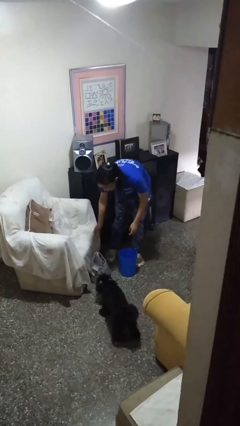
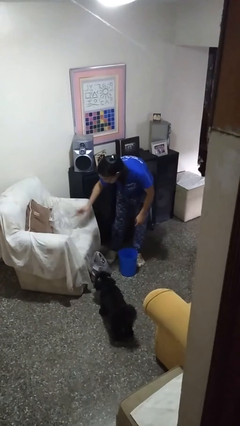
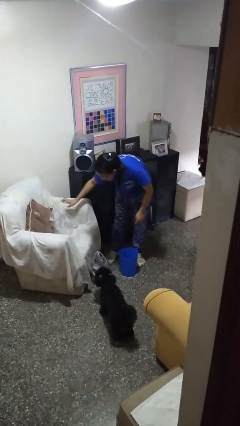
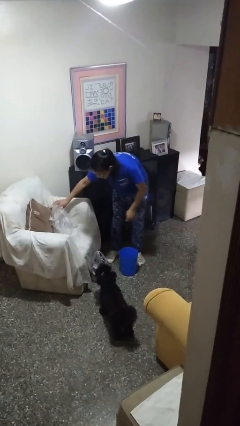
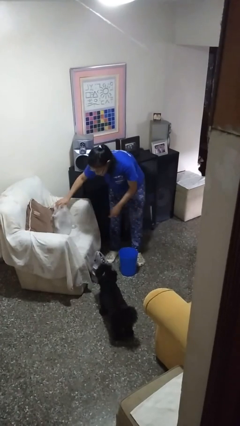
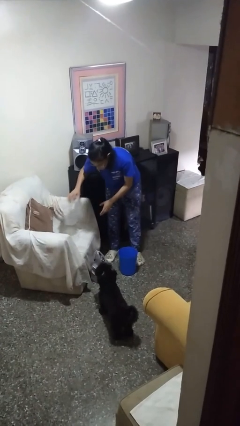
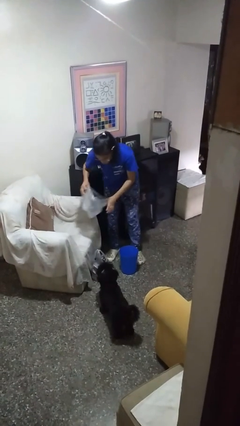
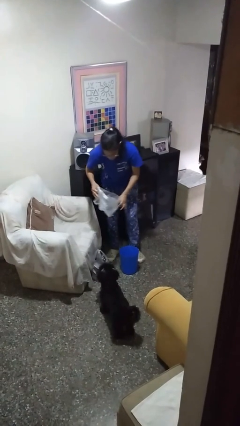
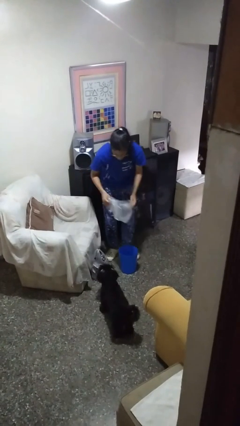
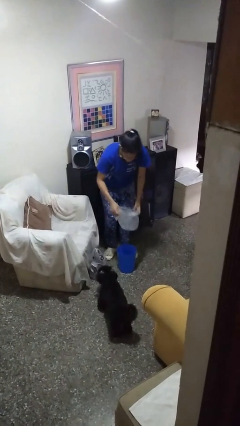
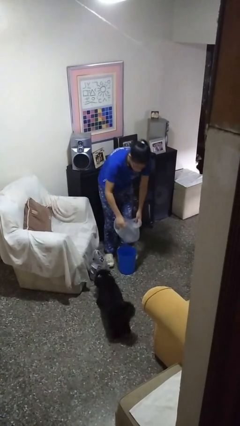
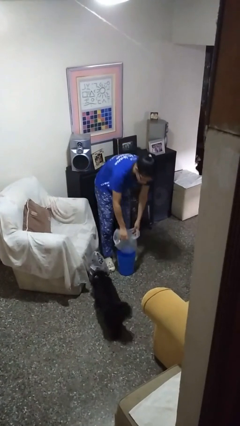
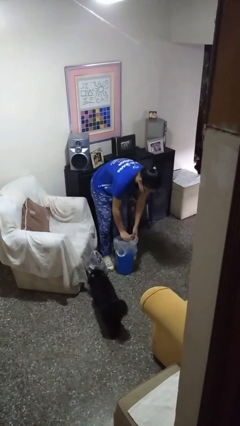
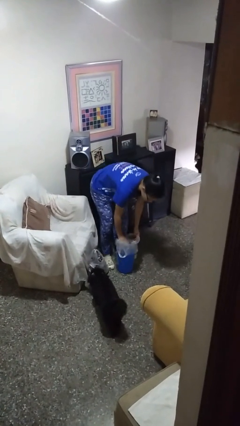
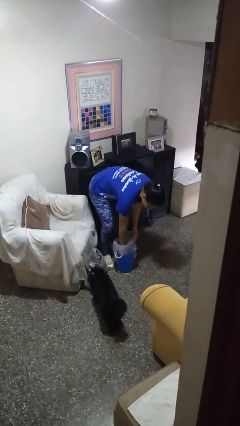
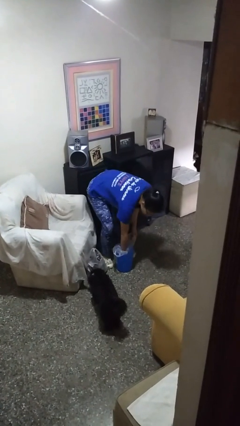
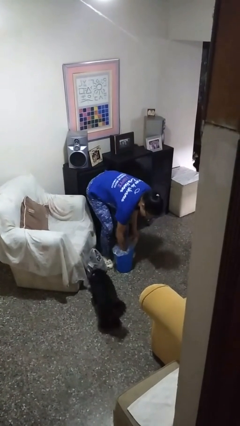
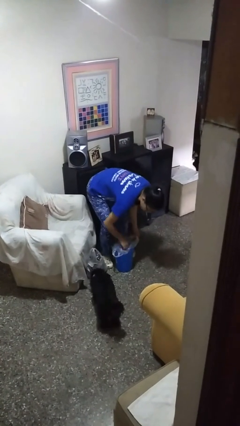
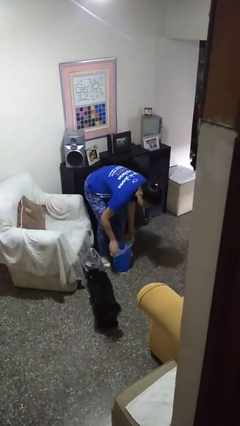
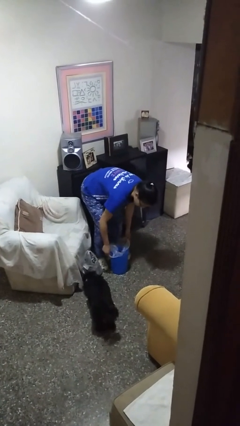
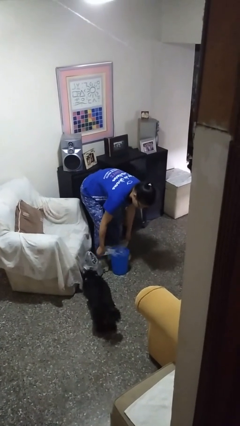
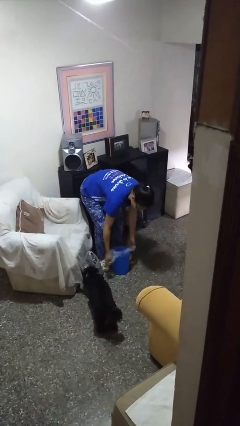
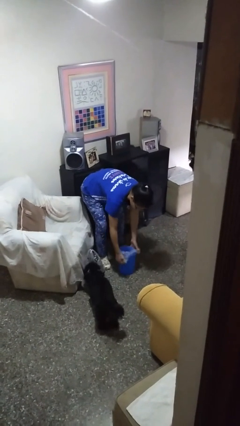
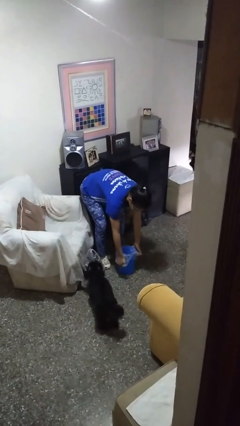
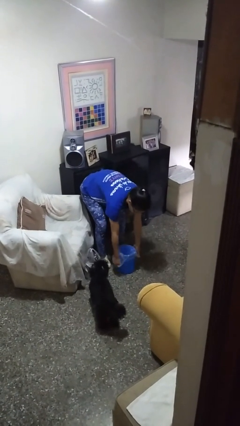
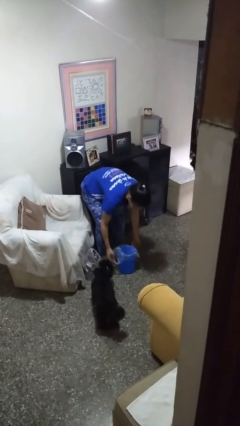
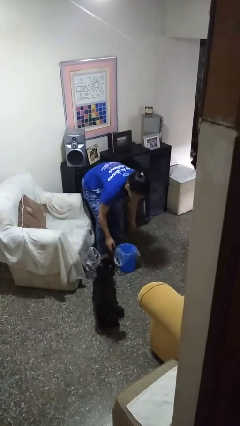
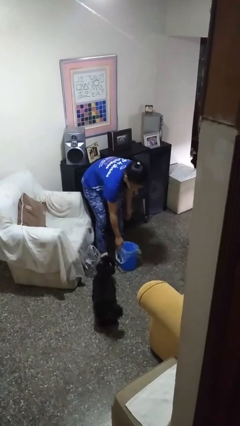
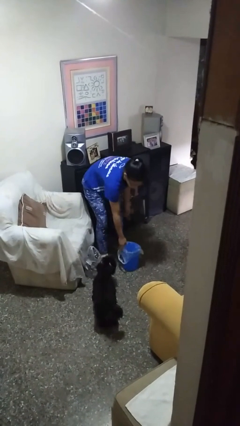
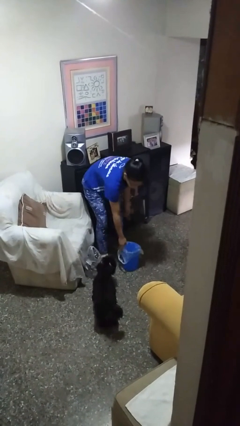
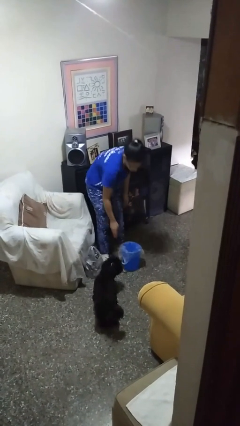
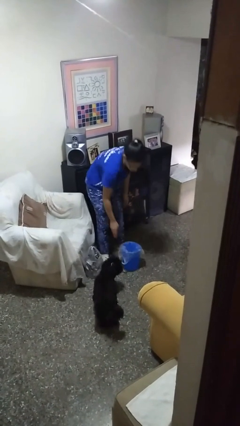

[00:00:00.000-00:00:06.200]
person inserts trashbag into trashcan

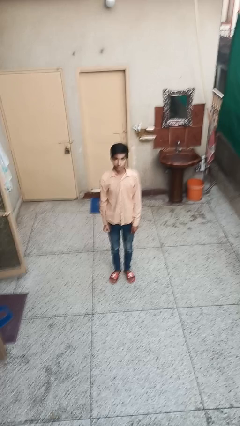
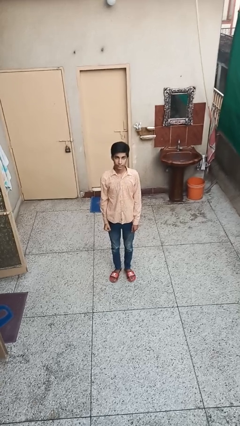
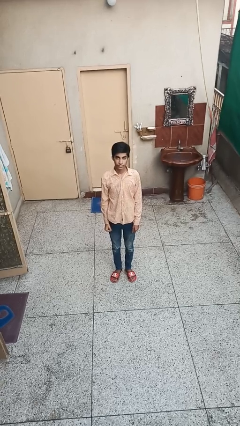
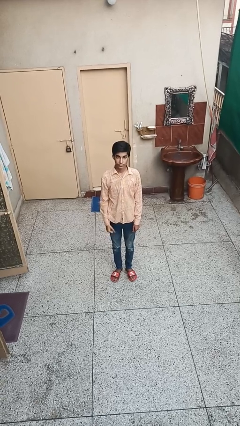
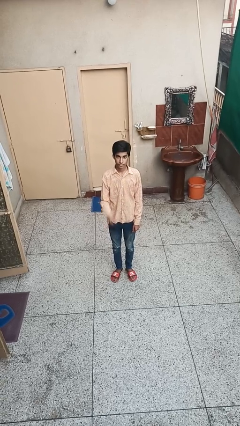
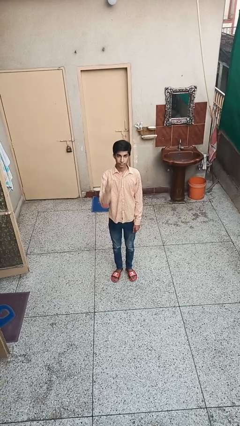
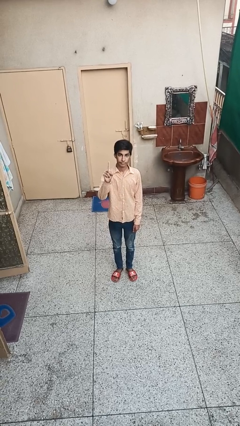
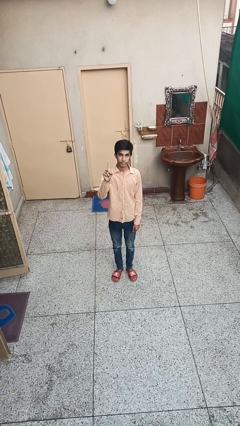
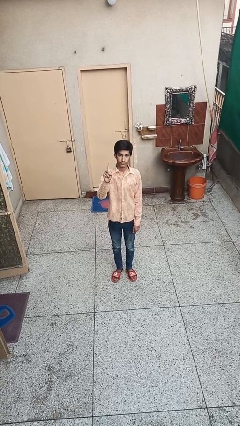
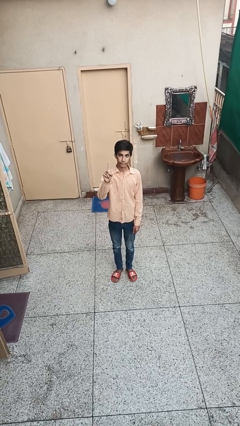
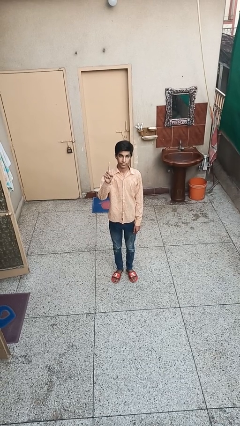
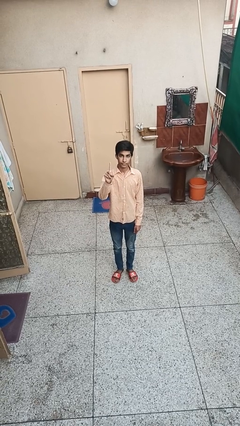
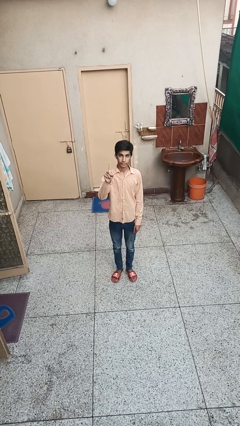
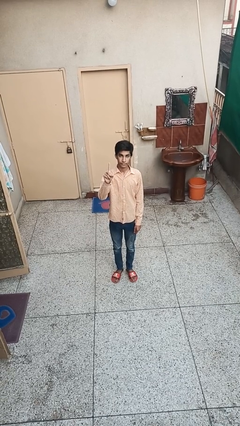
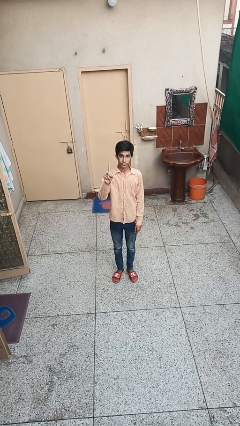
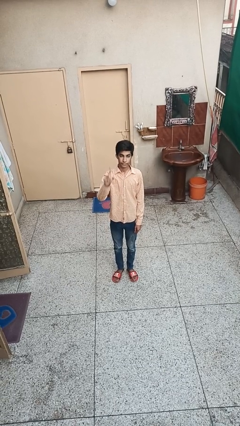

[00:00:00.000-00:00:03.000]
person gestures number one

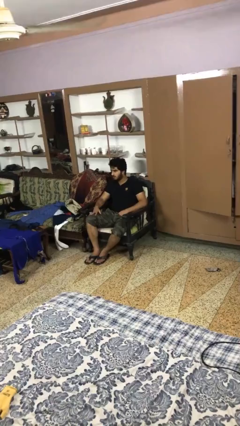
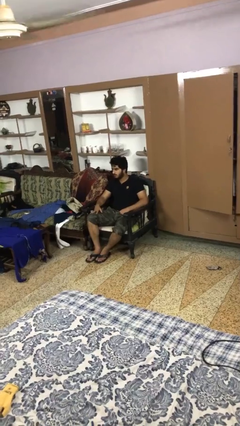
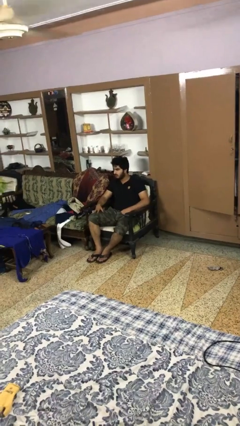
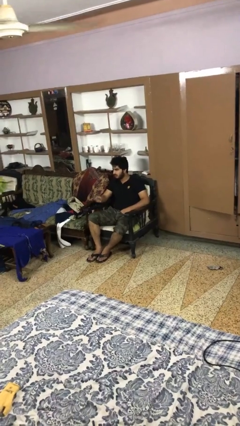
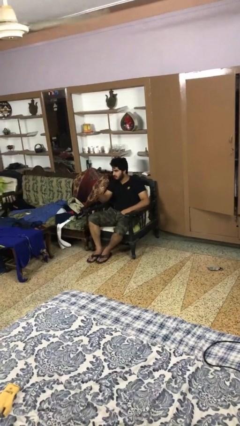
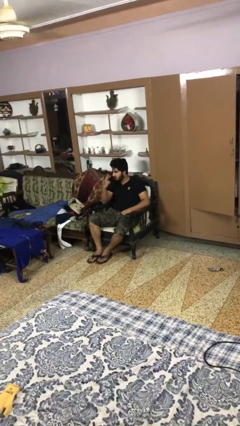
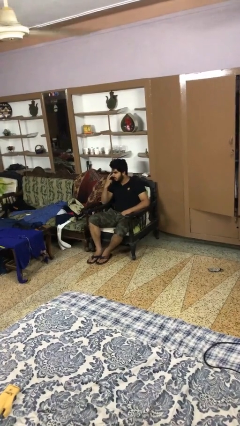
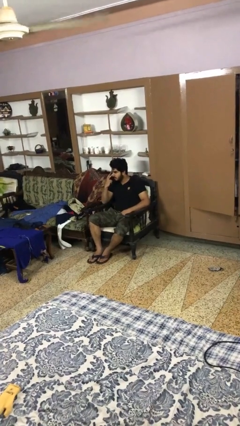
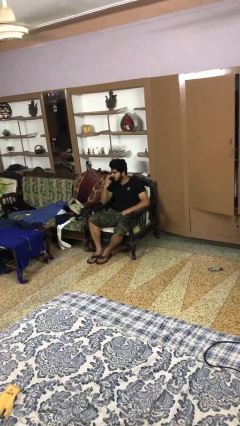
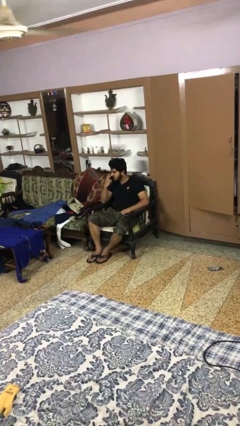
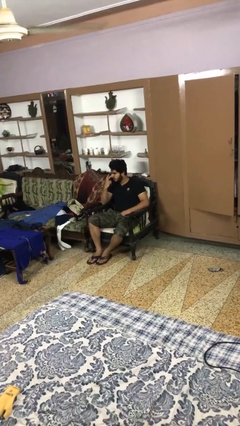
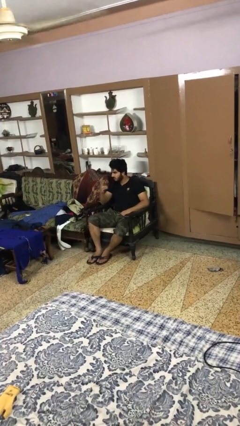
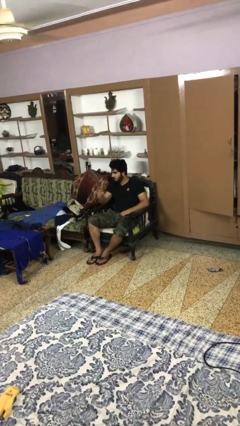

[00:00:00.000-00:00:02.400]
person gestures watch closely

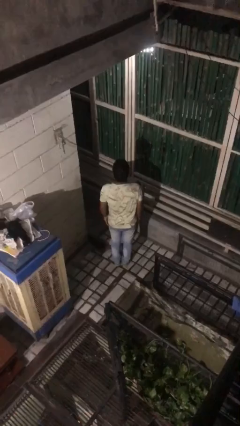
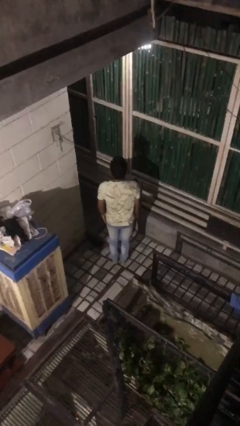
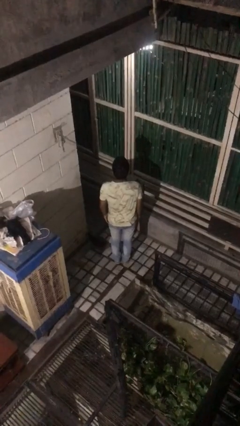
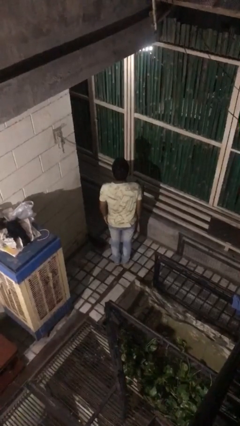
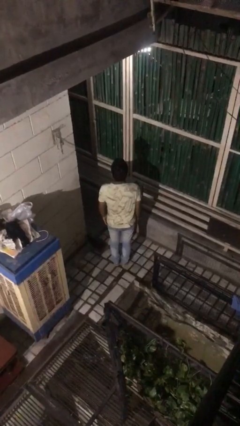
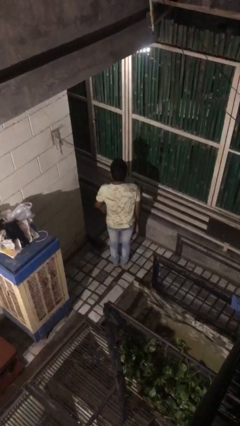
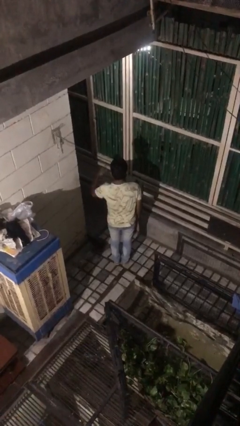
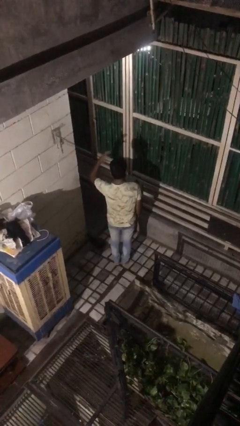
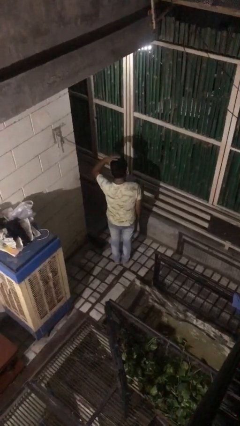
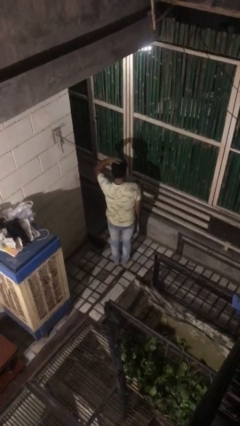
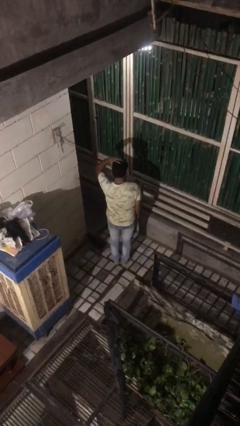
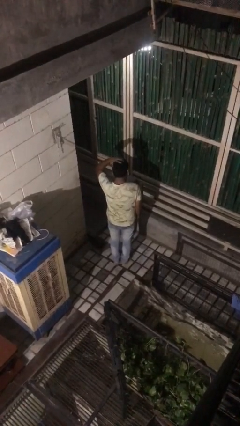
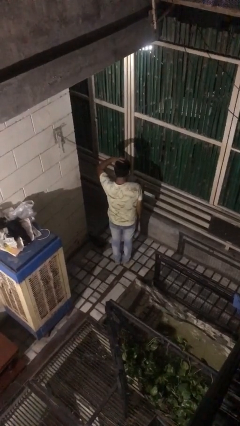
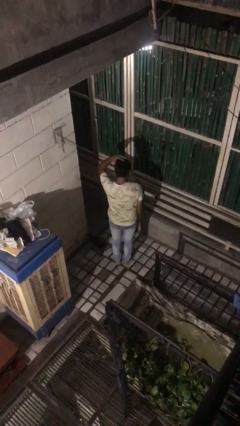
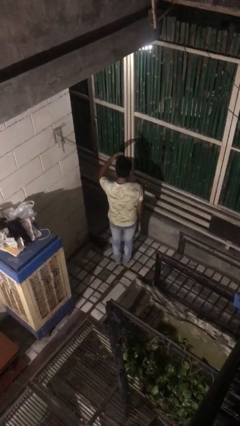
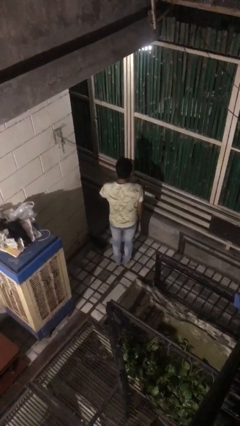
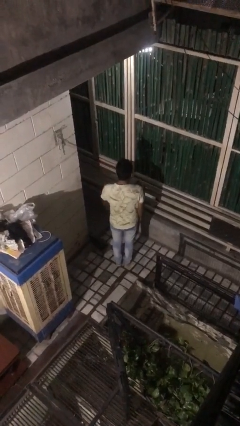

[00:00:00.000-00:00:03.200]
person pats head

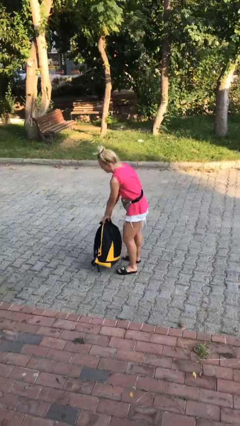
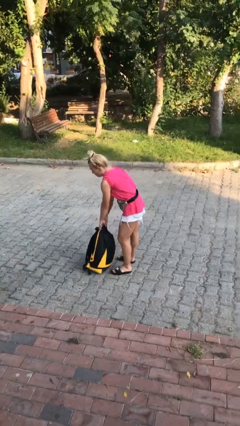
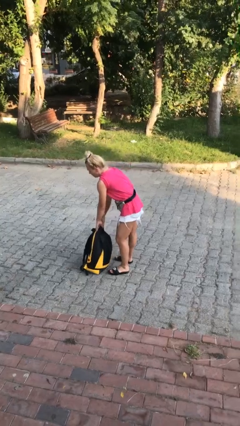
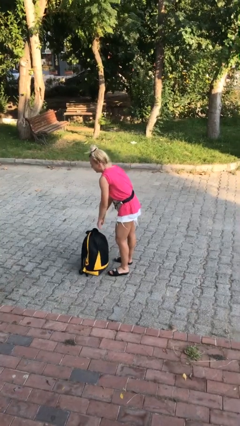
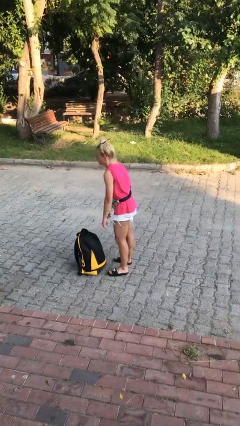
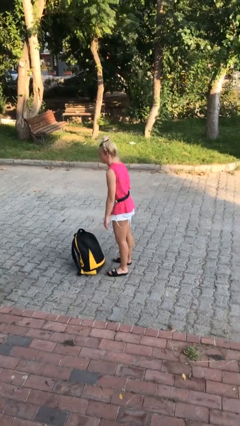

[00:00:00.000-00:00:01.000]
person puts down object on floor

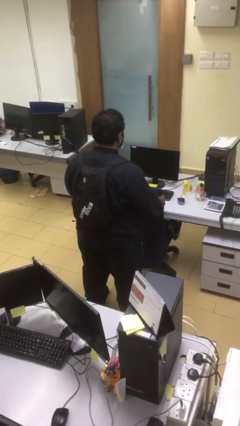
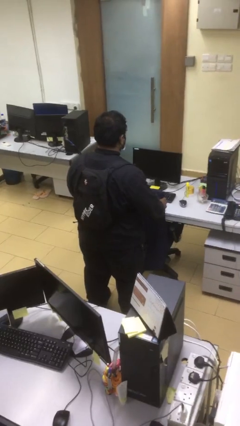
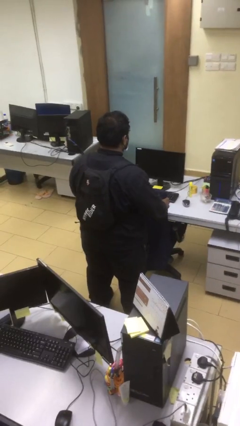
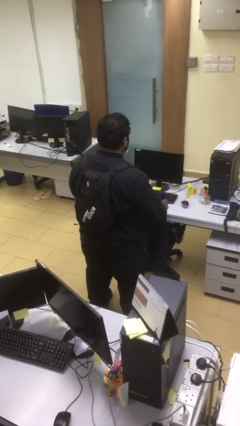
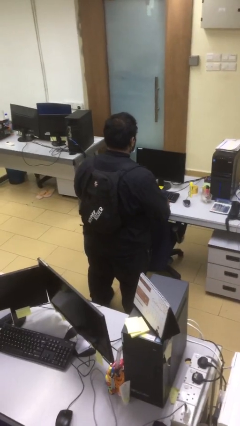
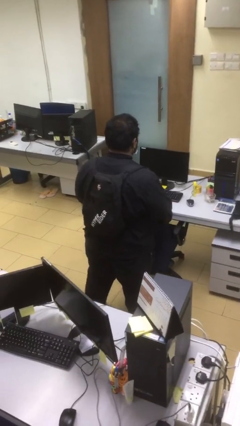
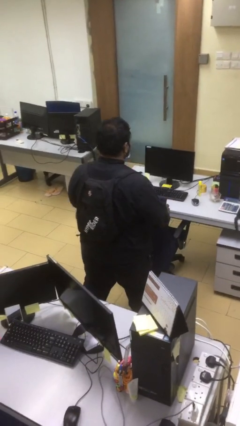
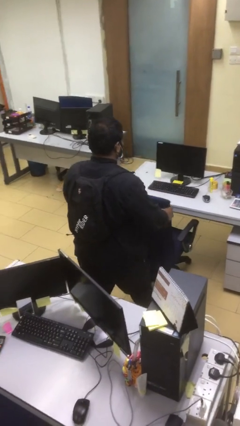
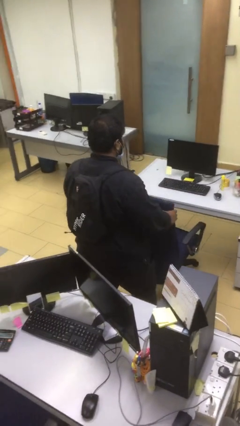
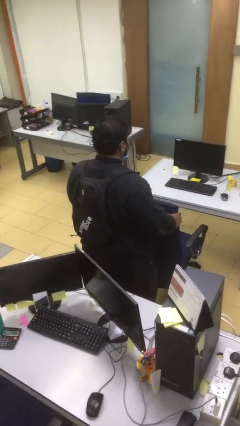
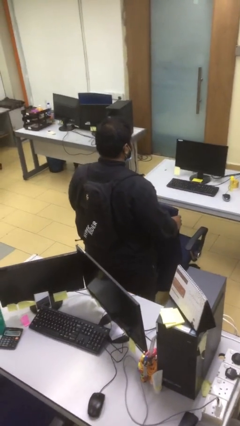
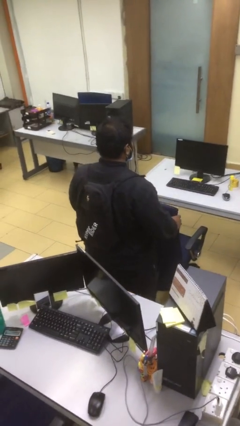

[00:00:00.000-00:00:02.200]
person pulls out chair
